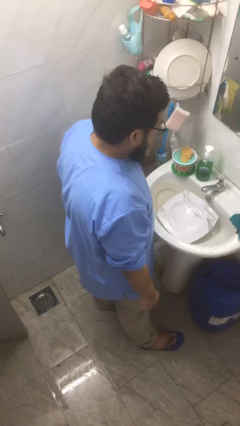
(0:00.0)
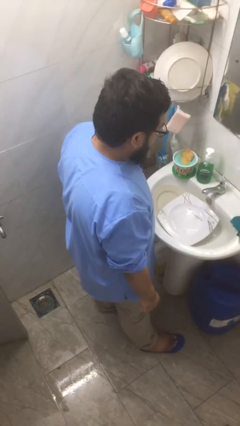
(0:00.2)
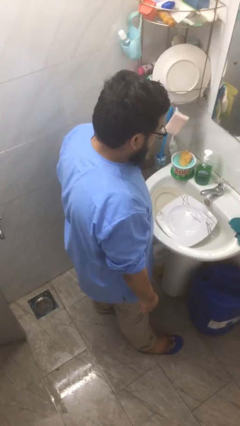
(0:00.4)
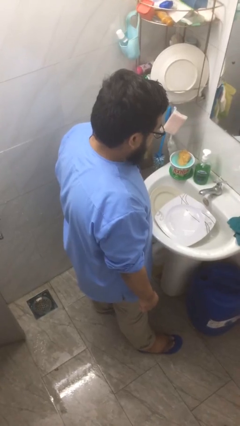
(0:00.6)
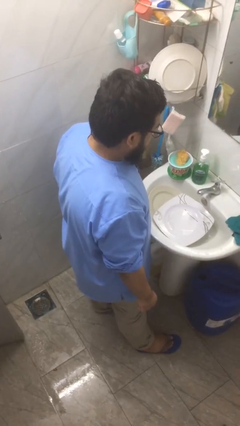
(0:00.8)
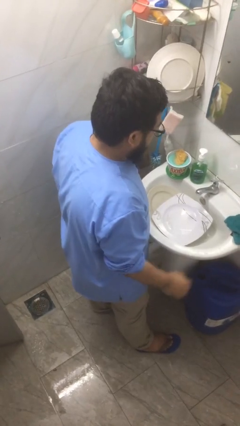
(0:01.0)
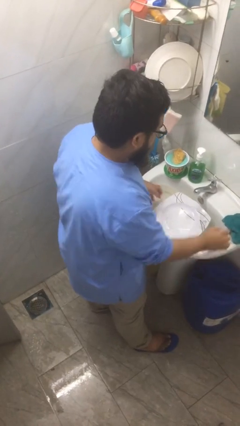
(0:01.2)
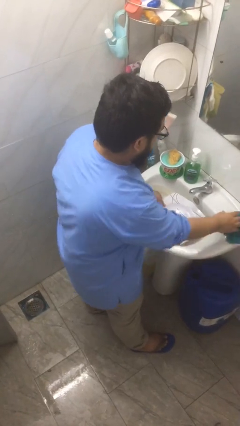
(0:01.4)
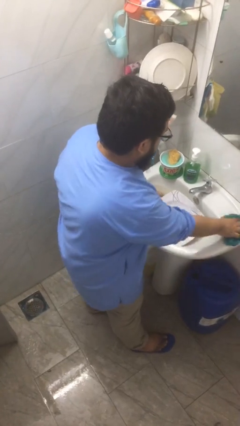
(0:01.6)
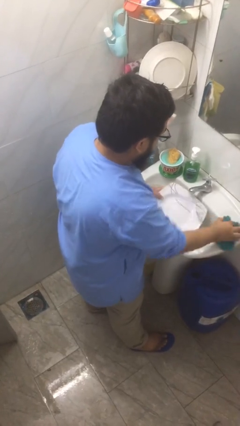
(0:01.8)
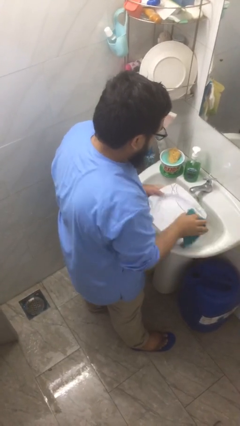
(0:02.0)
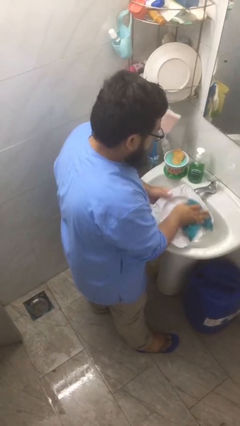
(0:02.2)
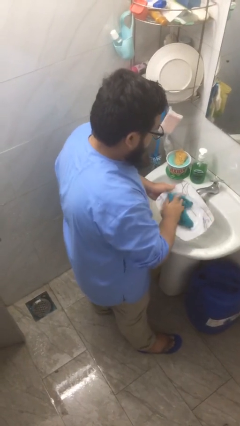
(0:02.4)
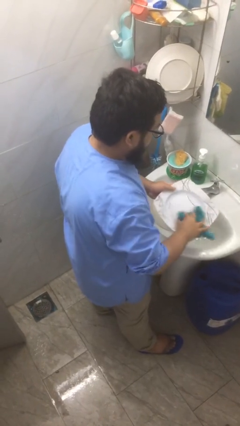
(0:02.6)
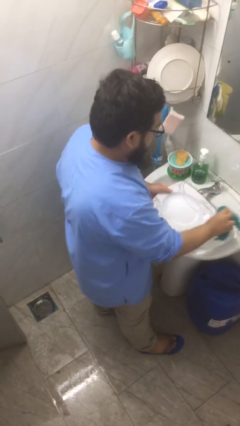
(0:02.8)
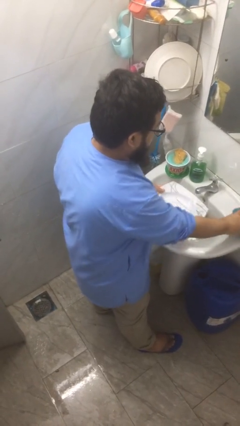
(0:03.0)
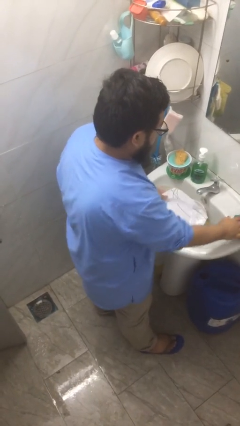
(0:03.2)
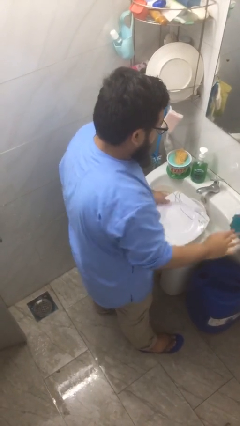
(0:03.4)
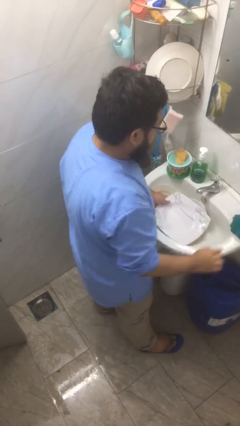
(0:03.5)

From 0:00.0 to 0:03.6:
person dries dish

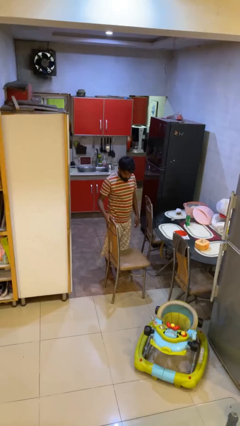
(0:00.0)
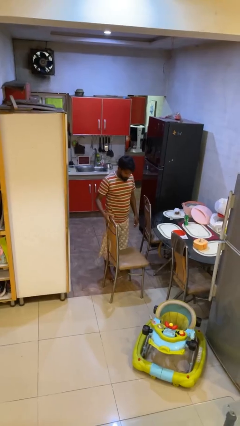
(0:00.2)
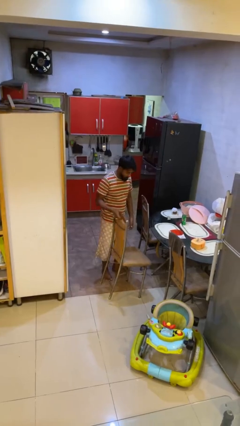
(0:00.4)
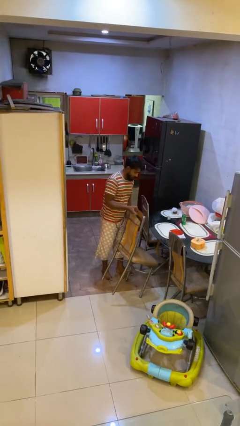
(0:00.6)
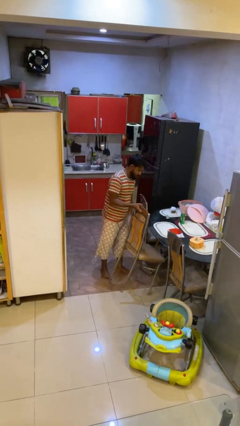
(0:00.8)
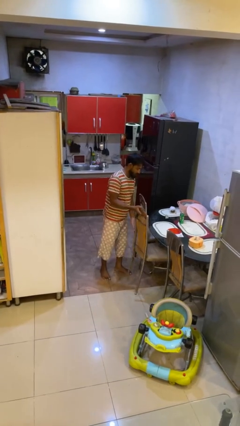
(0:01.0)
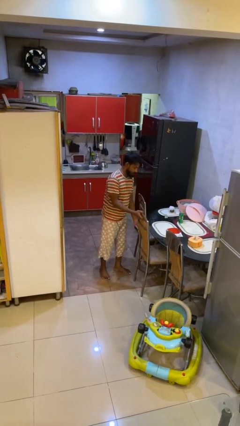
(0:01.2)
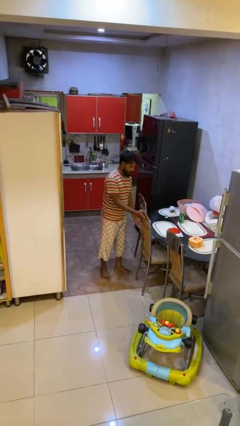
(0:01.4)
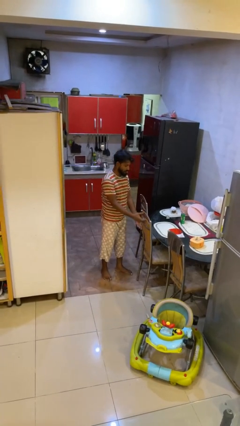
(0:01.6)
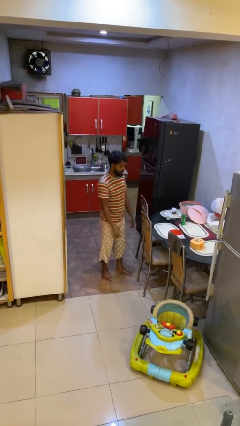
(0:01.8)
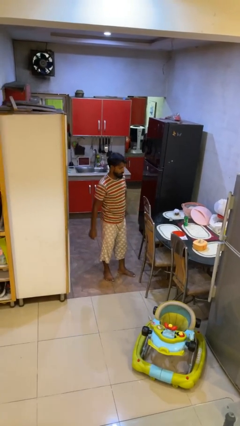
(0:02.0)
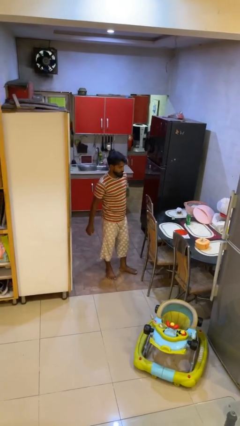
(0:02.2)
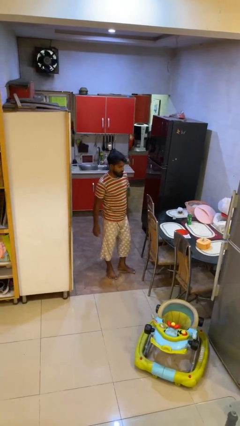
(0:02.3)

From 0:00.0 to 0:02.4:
person pushes in chair

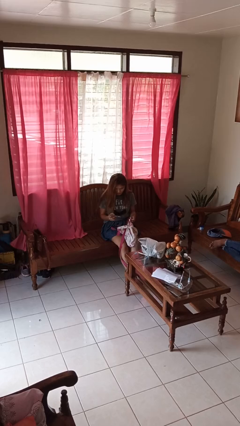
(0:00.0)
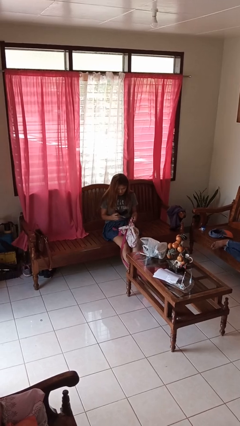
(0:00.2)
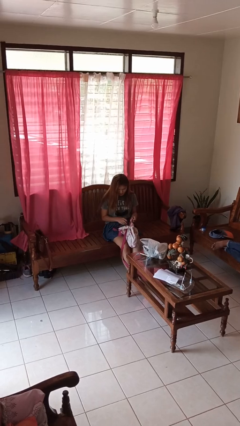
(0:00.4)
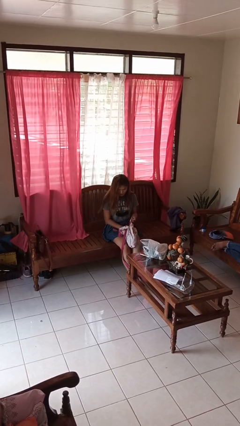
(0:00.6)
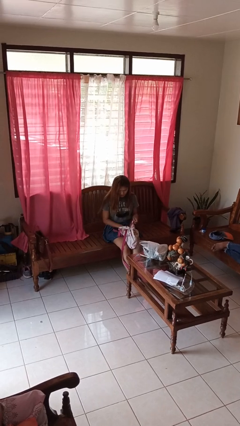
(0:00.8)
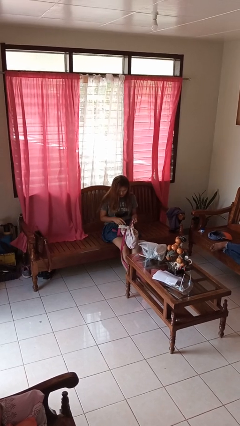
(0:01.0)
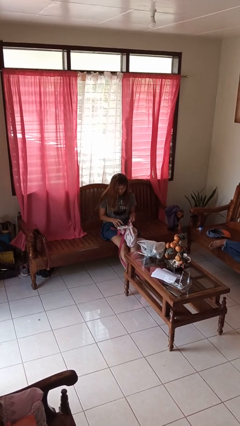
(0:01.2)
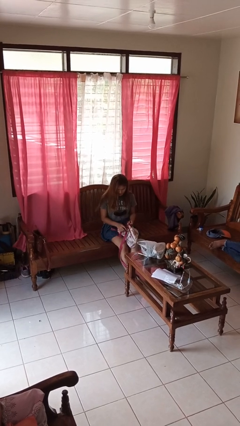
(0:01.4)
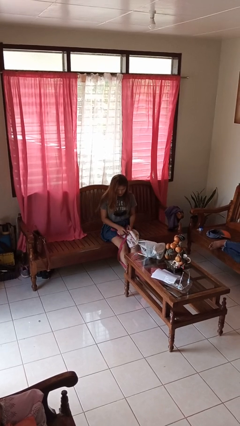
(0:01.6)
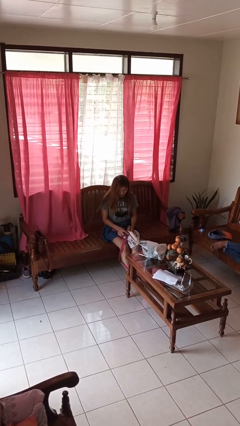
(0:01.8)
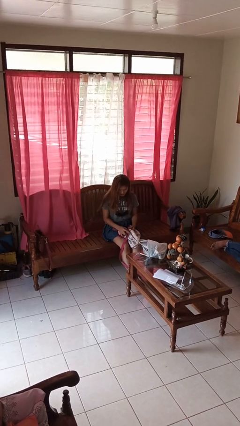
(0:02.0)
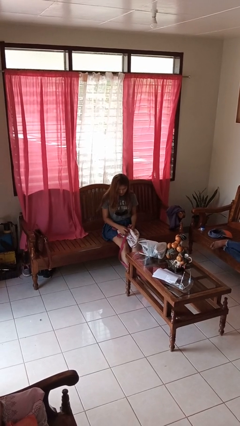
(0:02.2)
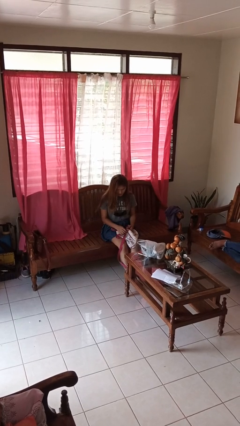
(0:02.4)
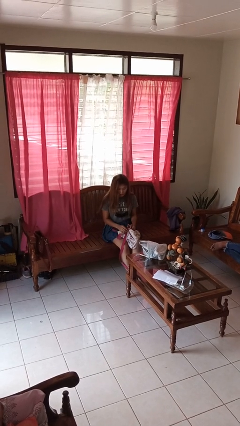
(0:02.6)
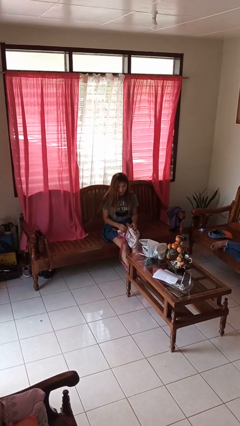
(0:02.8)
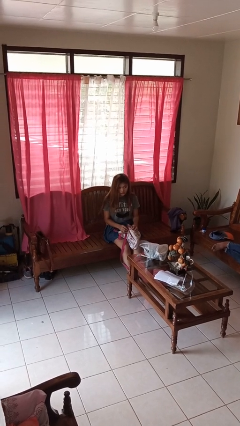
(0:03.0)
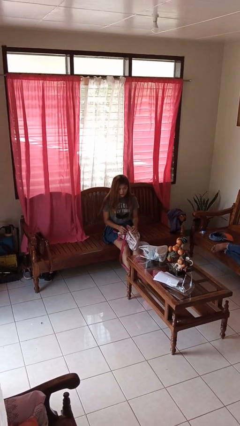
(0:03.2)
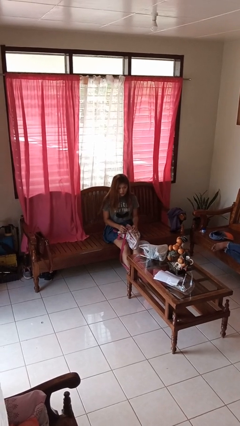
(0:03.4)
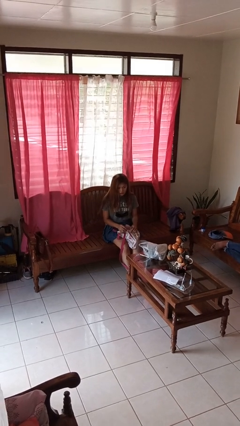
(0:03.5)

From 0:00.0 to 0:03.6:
person puts object into backpack

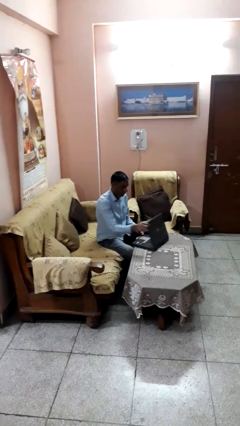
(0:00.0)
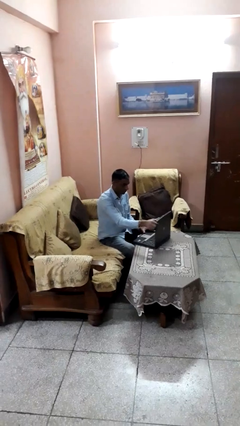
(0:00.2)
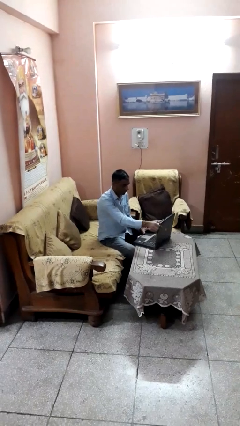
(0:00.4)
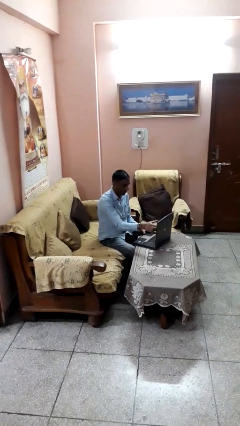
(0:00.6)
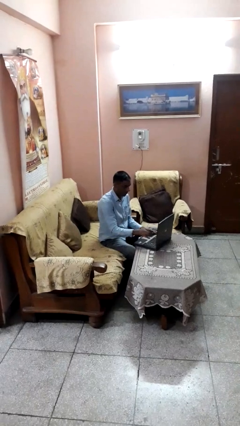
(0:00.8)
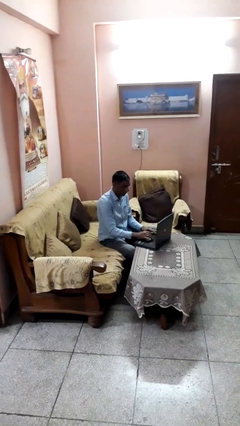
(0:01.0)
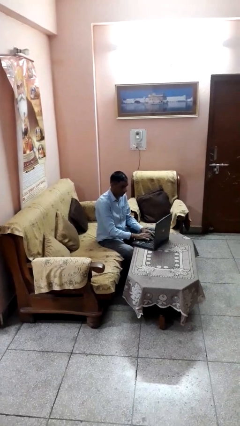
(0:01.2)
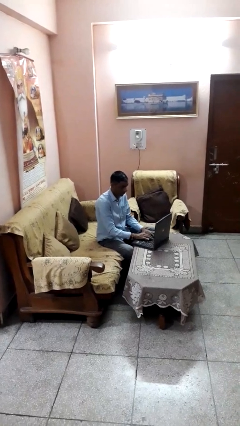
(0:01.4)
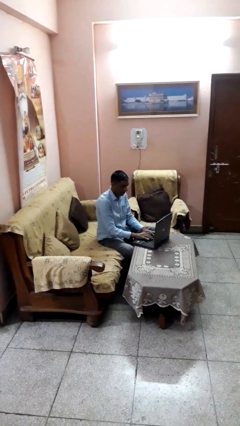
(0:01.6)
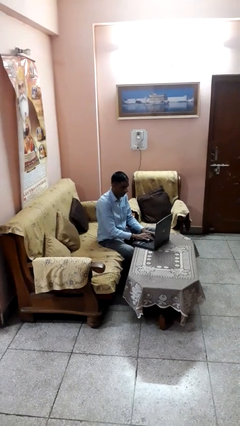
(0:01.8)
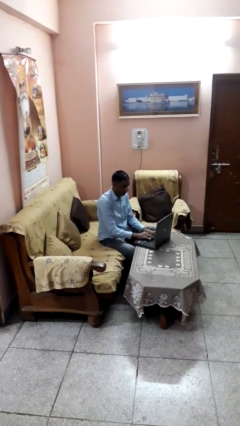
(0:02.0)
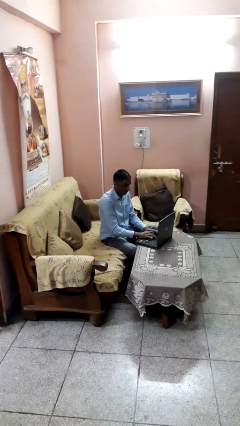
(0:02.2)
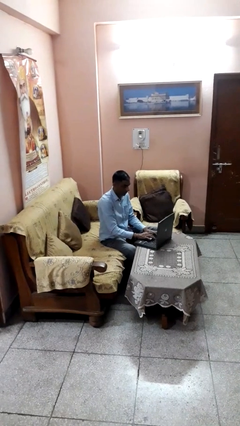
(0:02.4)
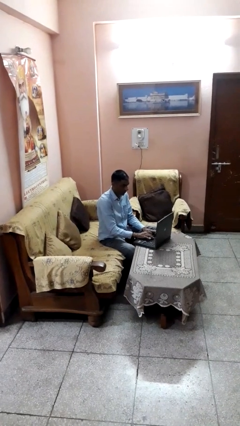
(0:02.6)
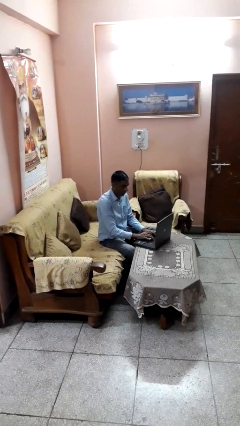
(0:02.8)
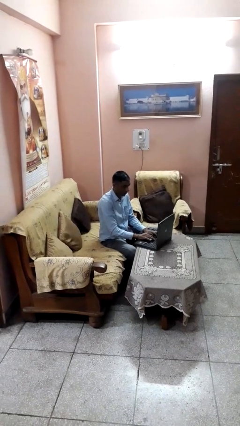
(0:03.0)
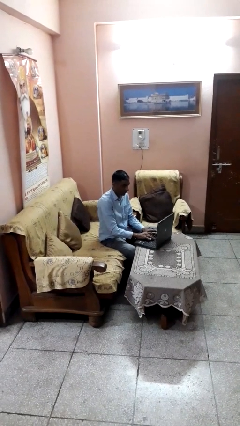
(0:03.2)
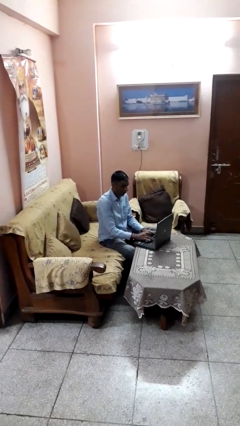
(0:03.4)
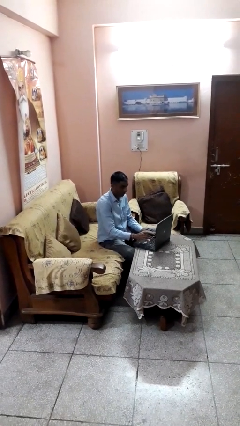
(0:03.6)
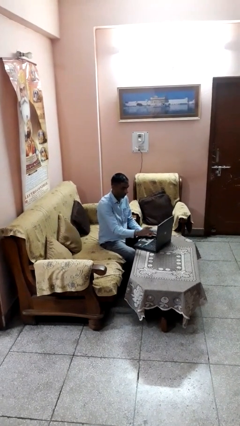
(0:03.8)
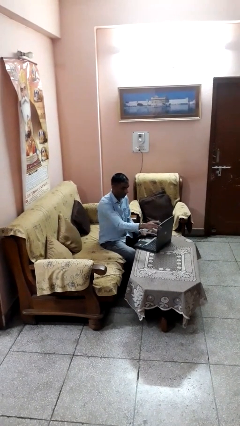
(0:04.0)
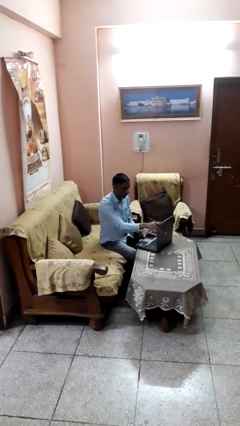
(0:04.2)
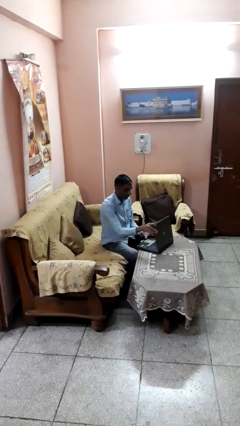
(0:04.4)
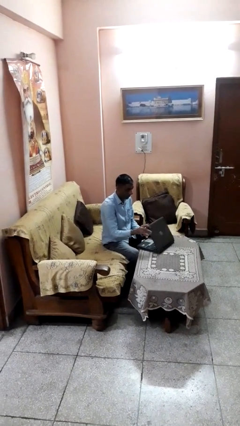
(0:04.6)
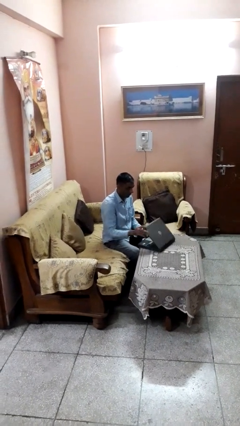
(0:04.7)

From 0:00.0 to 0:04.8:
person interacts with laptop

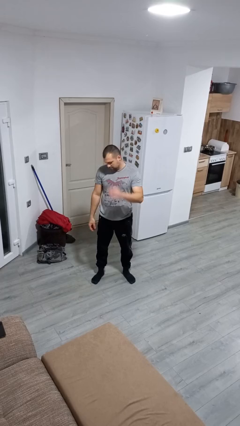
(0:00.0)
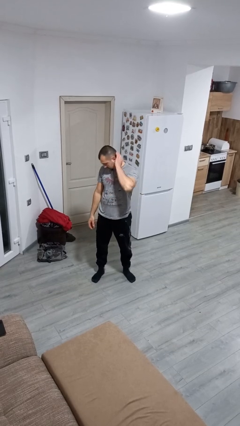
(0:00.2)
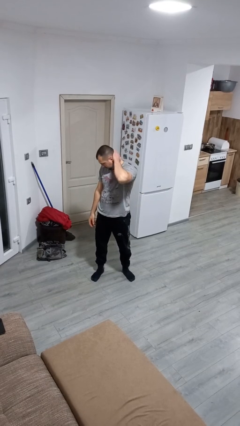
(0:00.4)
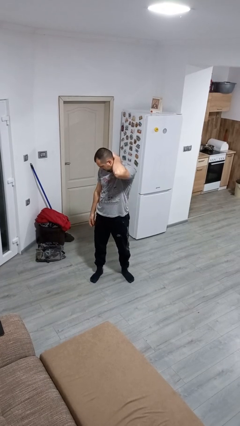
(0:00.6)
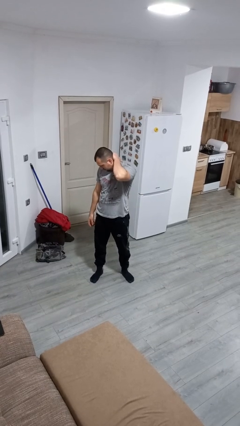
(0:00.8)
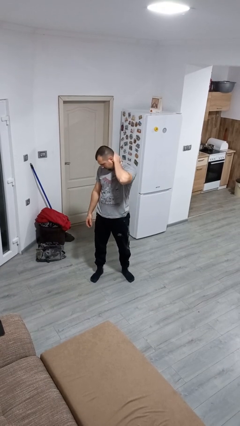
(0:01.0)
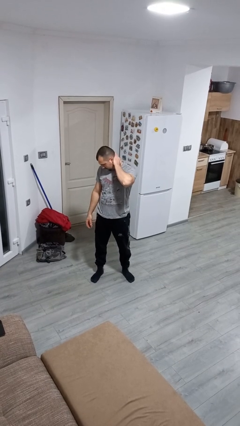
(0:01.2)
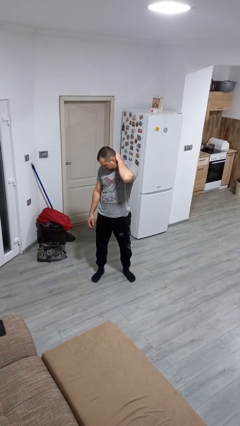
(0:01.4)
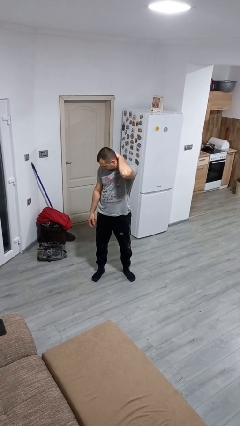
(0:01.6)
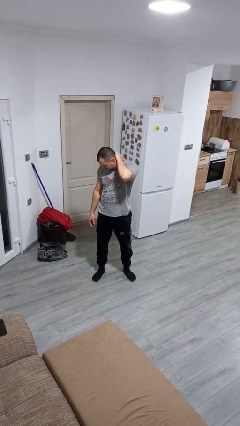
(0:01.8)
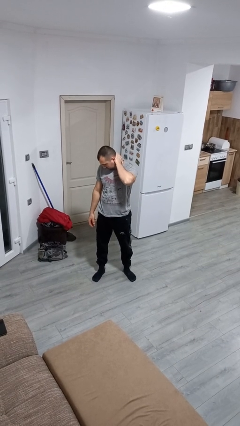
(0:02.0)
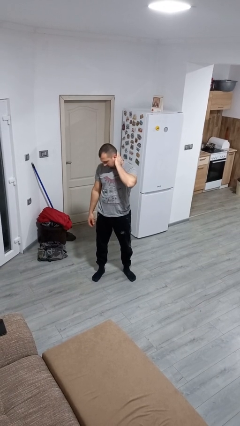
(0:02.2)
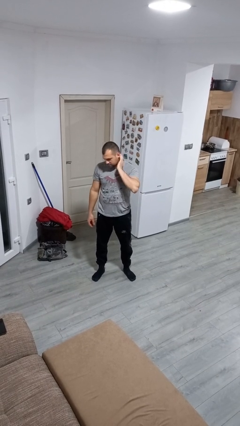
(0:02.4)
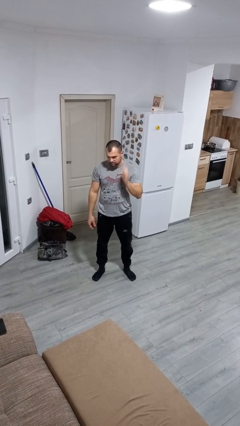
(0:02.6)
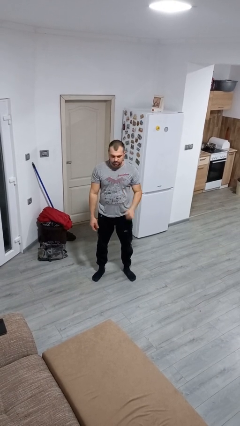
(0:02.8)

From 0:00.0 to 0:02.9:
person rubs neck

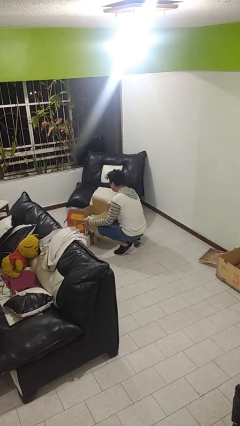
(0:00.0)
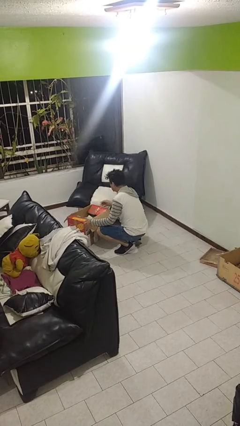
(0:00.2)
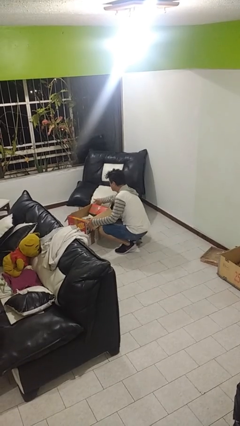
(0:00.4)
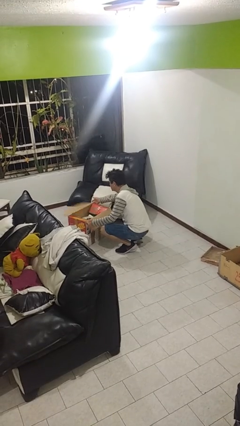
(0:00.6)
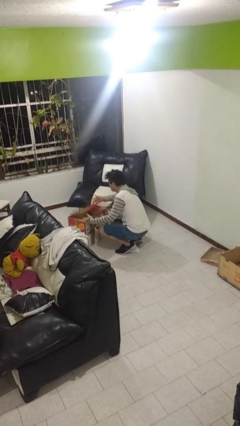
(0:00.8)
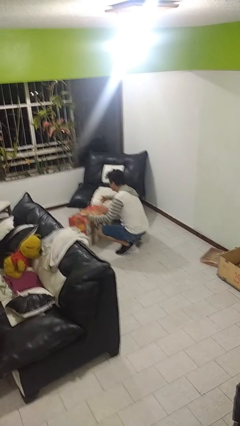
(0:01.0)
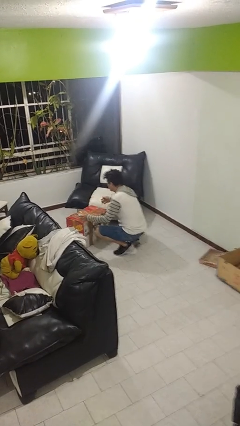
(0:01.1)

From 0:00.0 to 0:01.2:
person closes box
